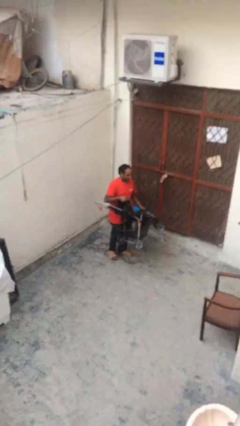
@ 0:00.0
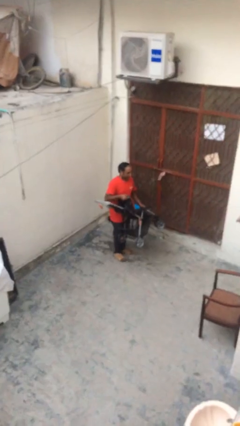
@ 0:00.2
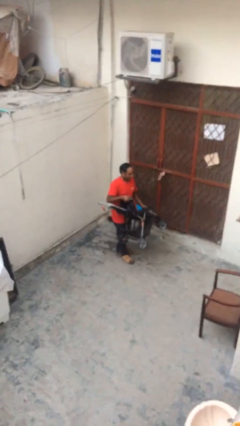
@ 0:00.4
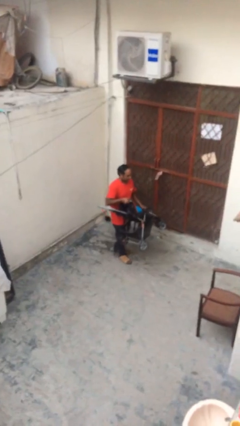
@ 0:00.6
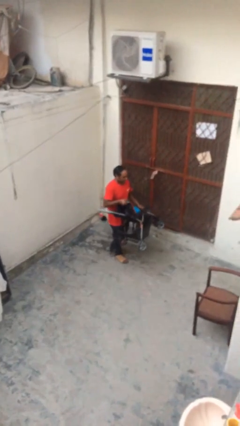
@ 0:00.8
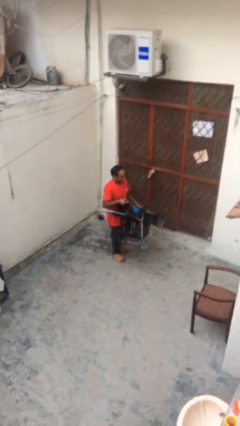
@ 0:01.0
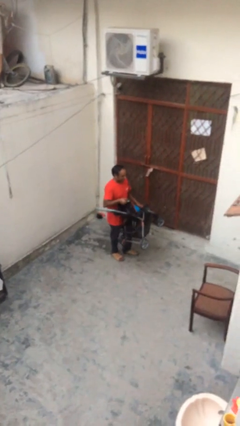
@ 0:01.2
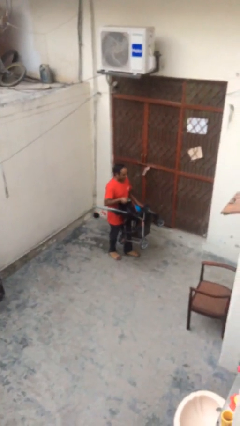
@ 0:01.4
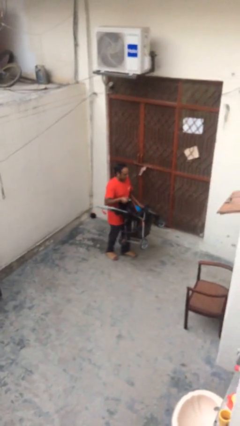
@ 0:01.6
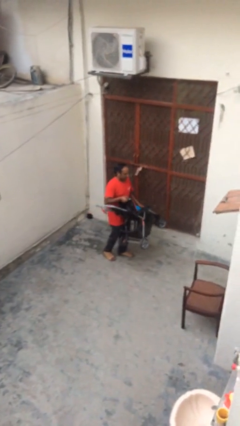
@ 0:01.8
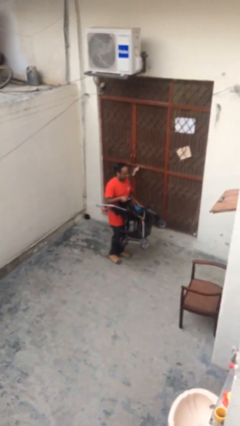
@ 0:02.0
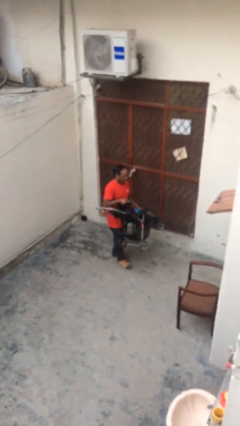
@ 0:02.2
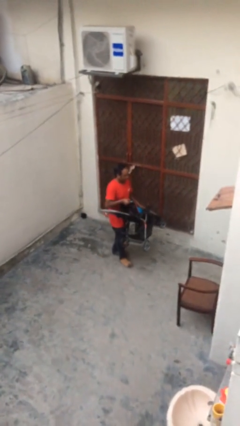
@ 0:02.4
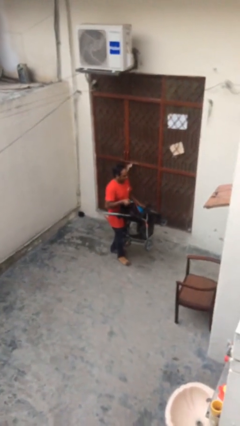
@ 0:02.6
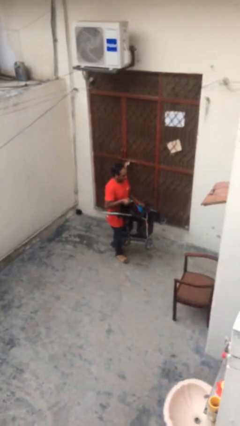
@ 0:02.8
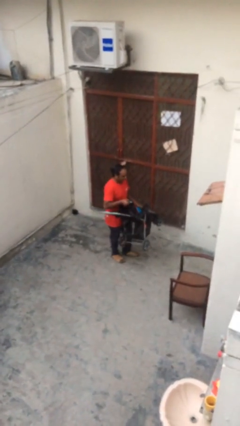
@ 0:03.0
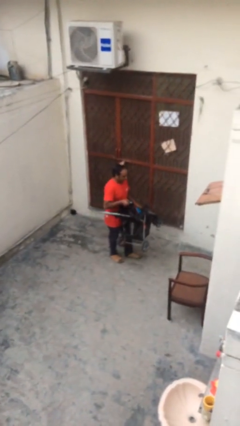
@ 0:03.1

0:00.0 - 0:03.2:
person carries heavy object

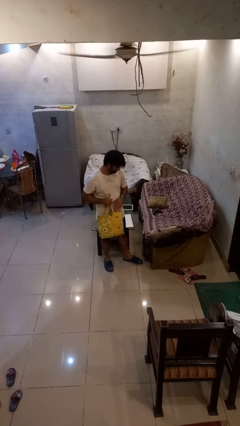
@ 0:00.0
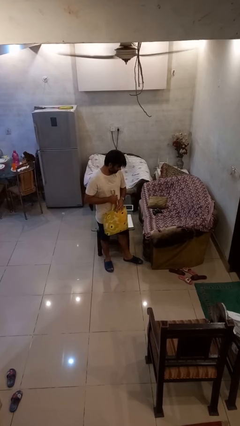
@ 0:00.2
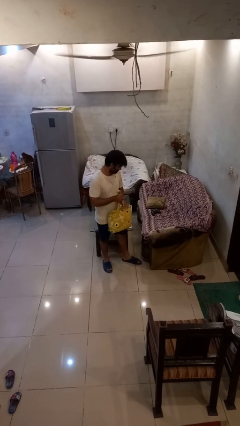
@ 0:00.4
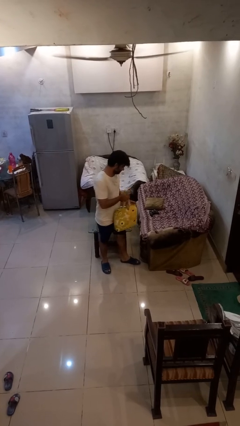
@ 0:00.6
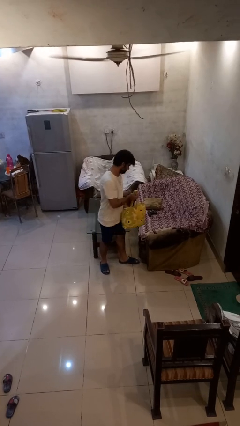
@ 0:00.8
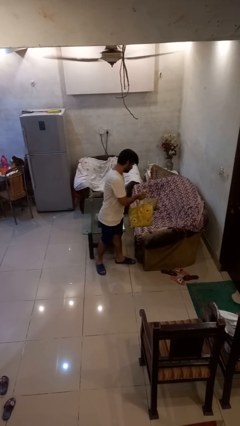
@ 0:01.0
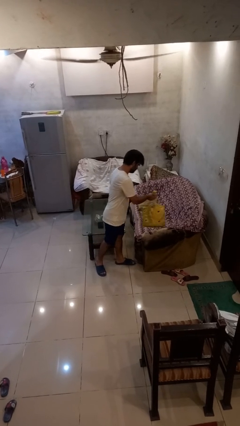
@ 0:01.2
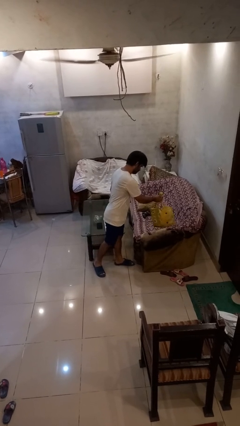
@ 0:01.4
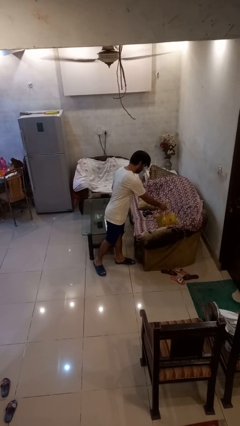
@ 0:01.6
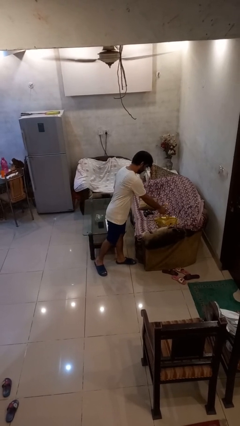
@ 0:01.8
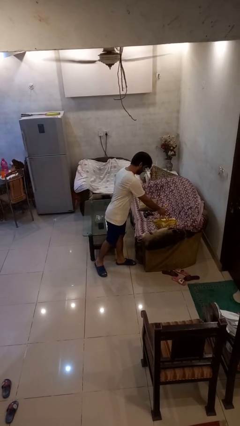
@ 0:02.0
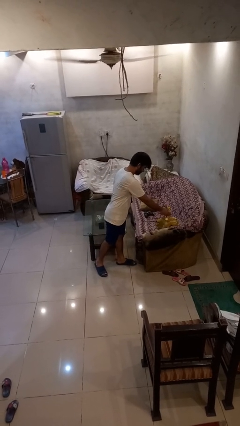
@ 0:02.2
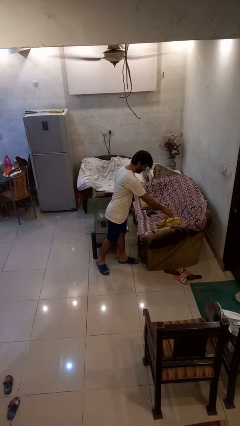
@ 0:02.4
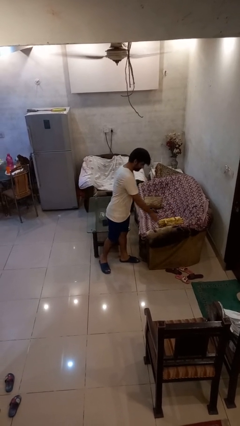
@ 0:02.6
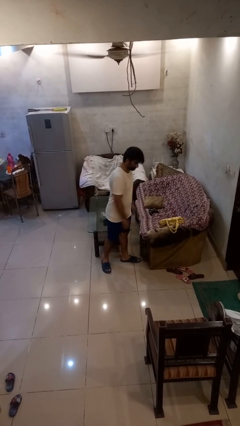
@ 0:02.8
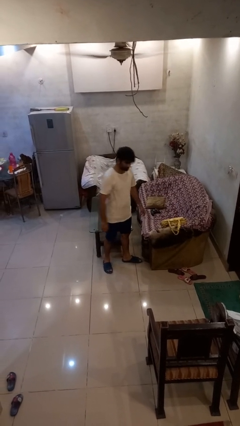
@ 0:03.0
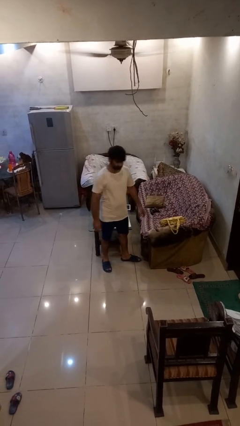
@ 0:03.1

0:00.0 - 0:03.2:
person puts down object on couch

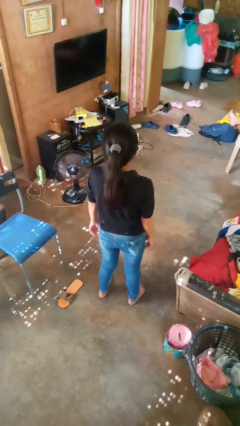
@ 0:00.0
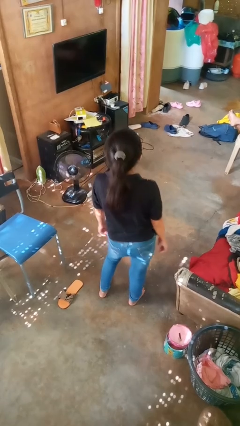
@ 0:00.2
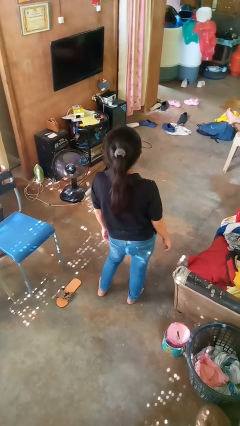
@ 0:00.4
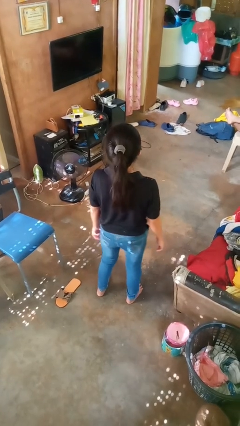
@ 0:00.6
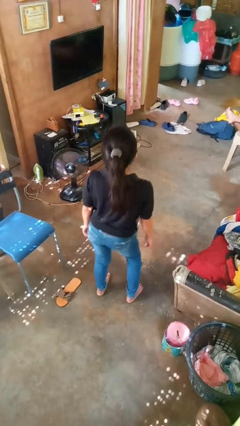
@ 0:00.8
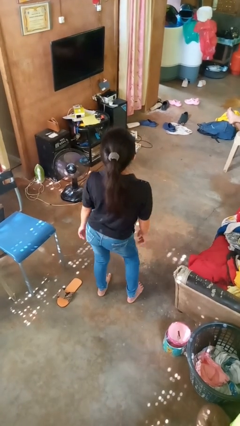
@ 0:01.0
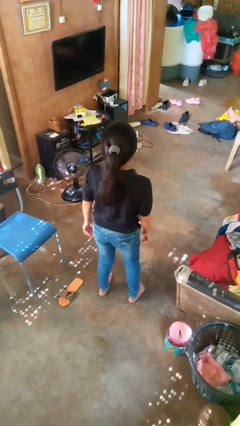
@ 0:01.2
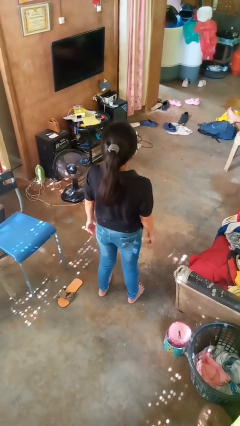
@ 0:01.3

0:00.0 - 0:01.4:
person wiggles hips

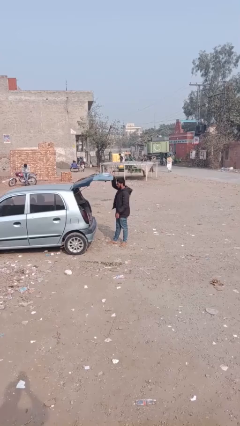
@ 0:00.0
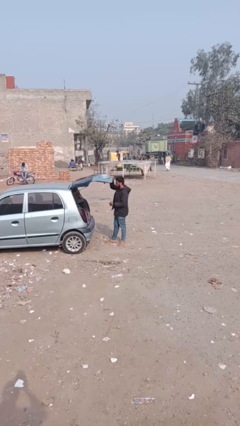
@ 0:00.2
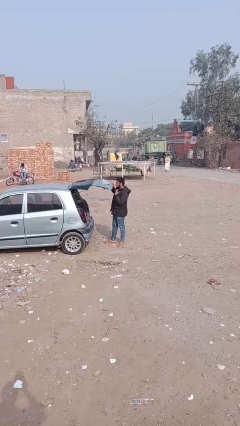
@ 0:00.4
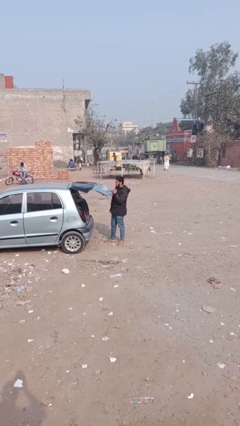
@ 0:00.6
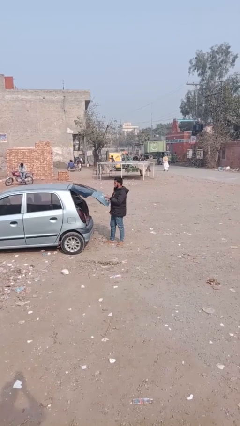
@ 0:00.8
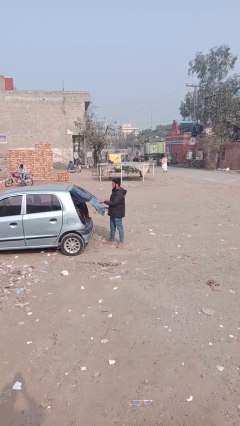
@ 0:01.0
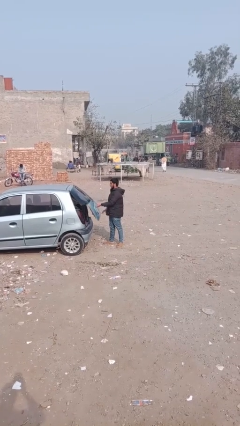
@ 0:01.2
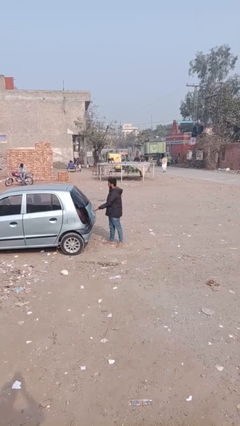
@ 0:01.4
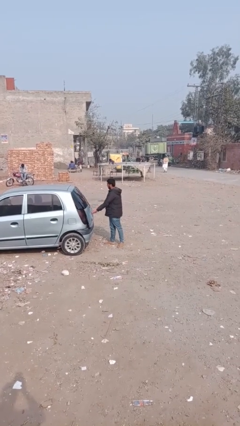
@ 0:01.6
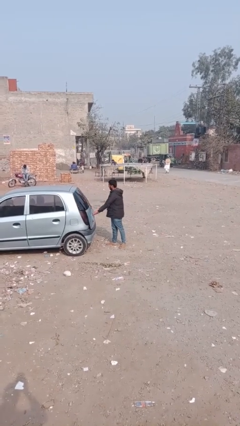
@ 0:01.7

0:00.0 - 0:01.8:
person closes car trunk

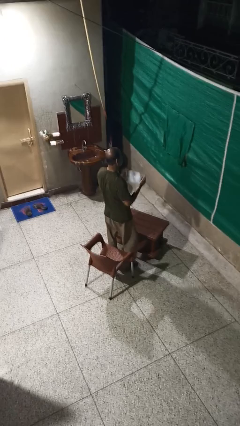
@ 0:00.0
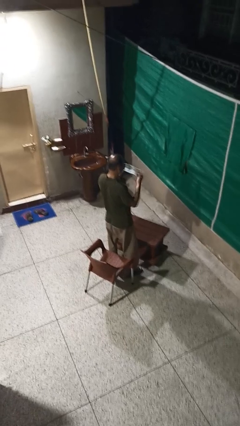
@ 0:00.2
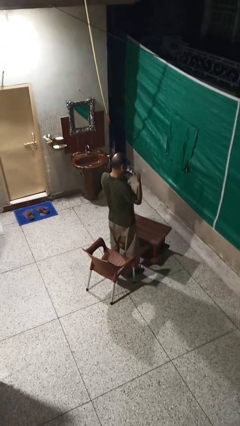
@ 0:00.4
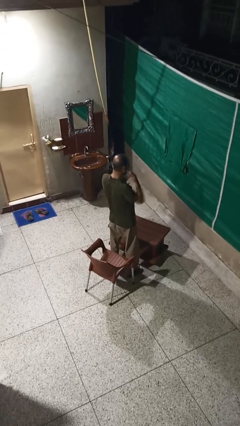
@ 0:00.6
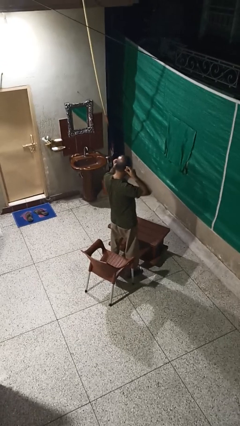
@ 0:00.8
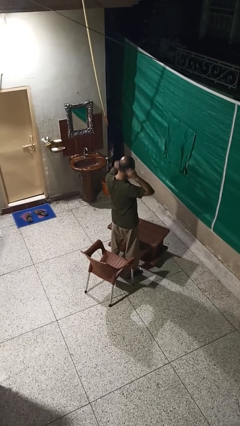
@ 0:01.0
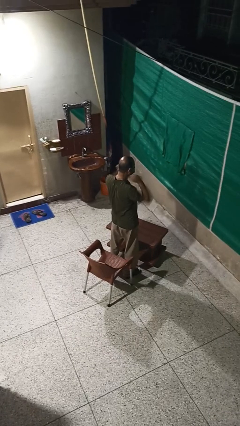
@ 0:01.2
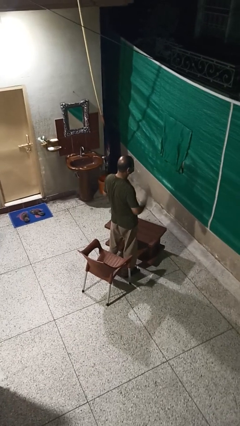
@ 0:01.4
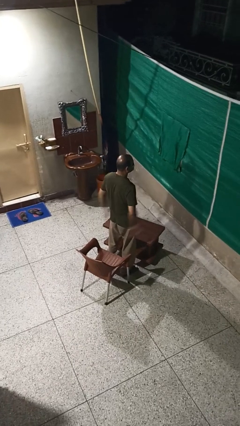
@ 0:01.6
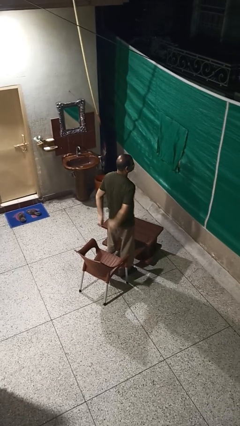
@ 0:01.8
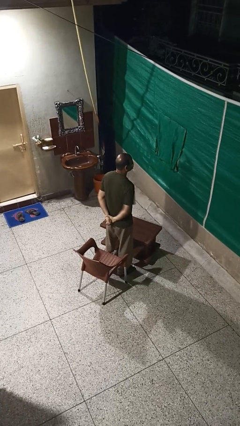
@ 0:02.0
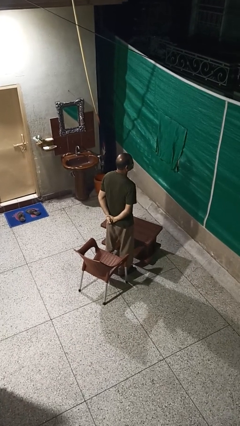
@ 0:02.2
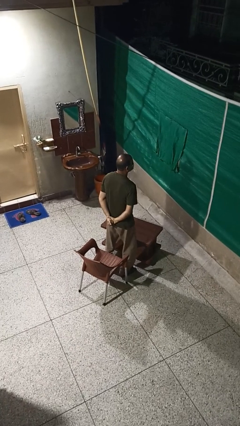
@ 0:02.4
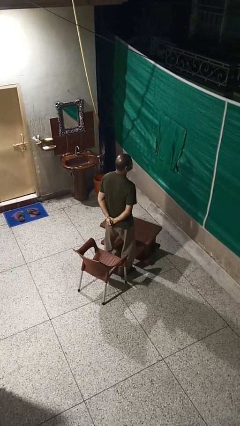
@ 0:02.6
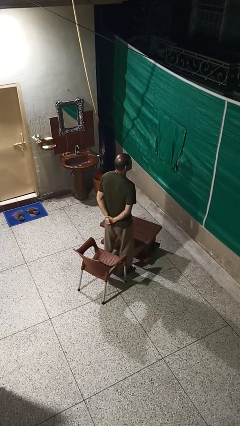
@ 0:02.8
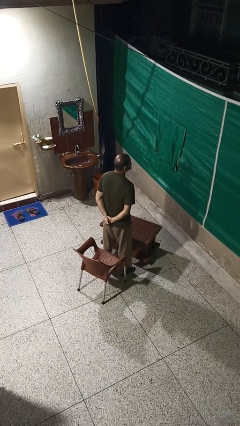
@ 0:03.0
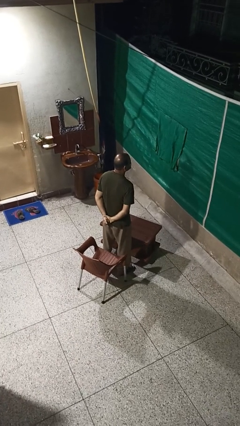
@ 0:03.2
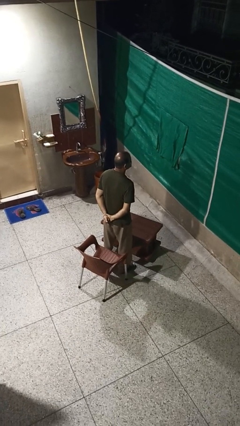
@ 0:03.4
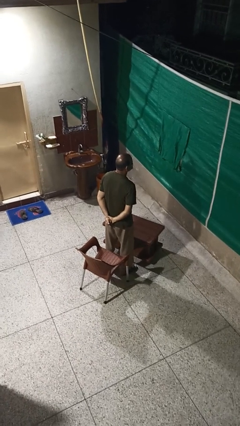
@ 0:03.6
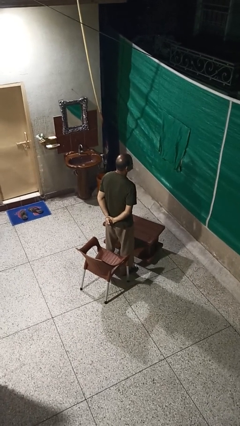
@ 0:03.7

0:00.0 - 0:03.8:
person puts on facemask

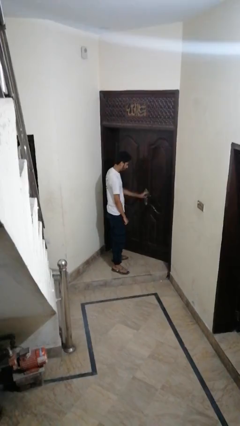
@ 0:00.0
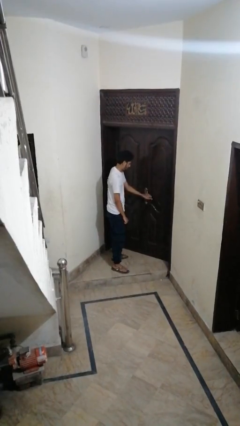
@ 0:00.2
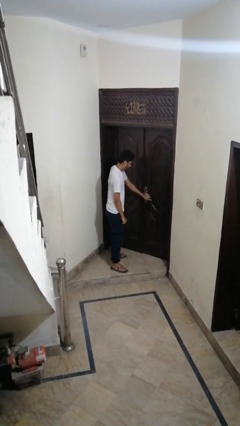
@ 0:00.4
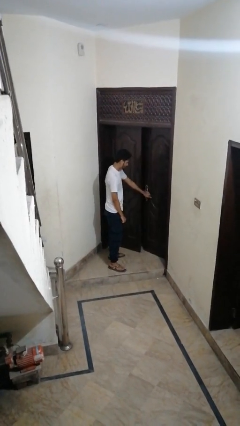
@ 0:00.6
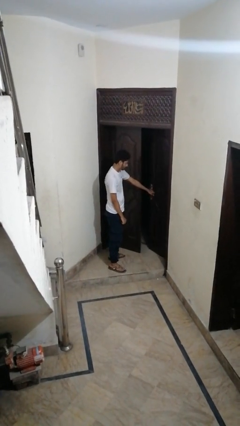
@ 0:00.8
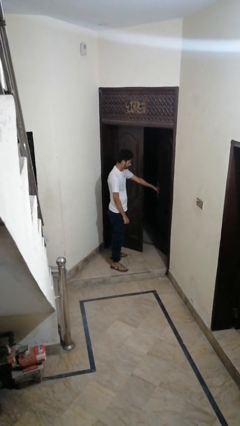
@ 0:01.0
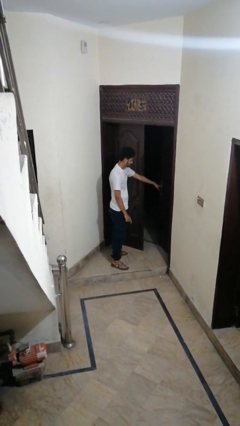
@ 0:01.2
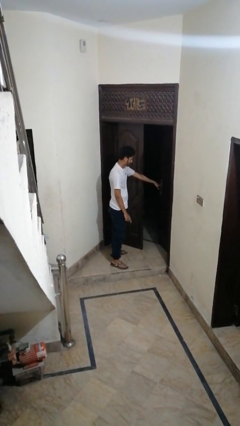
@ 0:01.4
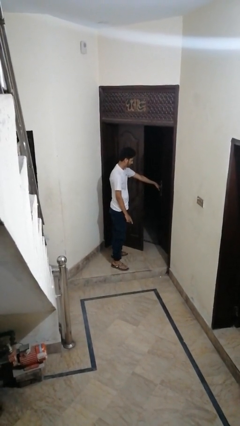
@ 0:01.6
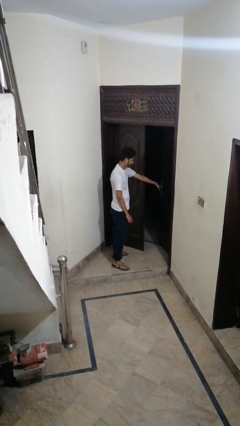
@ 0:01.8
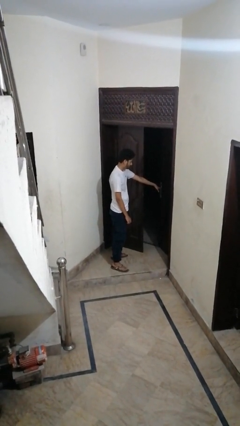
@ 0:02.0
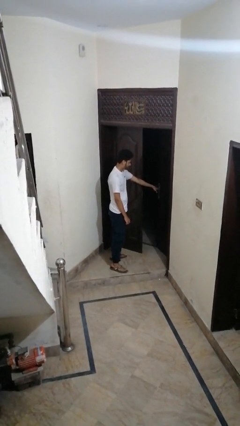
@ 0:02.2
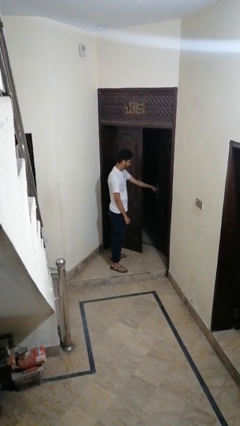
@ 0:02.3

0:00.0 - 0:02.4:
person opens facility door

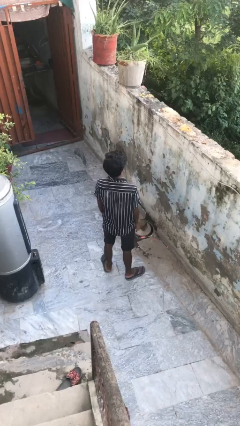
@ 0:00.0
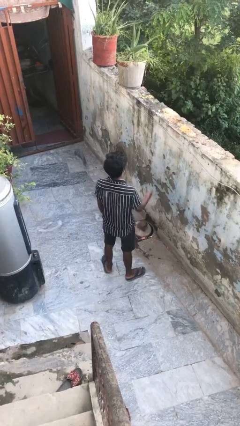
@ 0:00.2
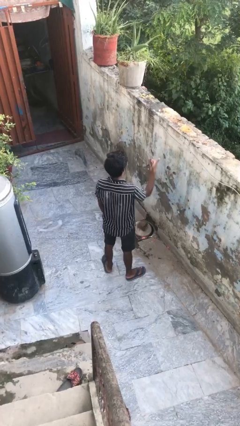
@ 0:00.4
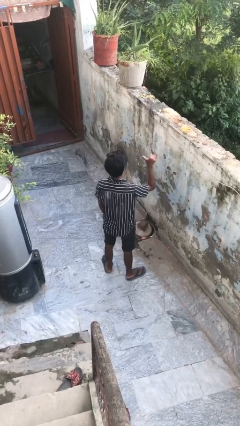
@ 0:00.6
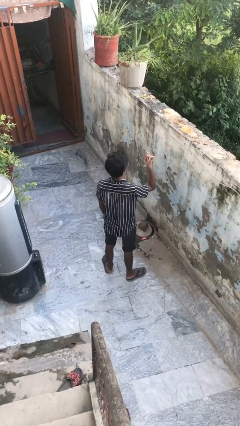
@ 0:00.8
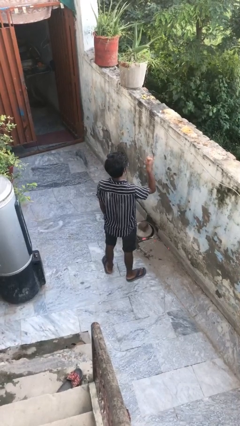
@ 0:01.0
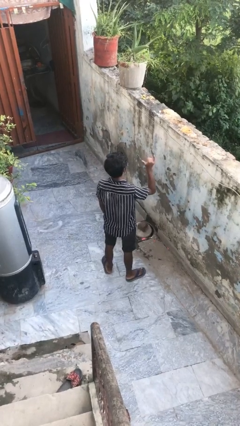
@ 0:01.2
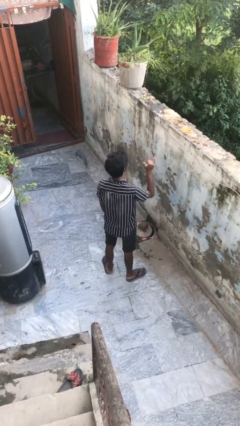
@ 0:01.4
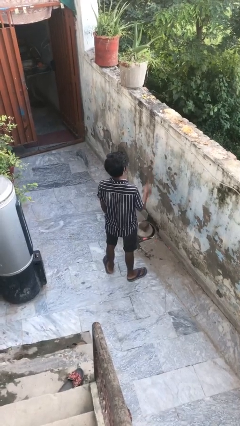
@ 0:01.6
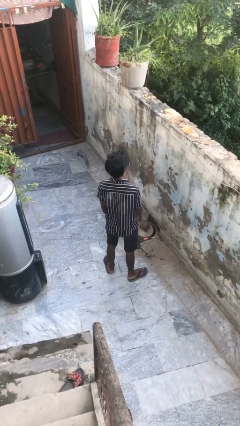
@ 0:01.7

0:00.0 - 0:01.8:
person gestures hang loose
